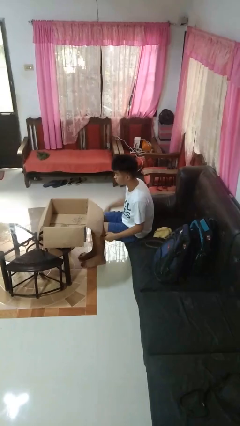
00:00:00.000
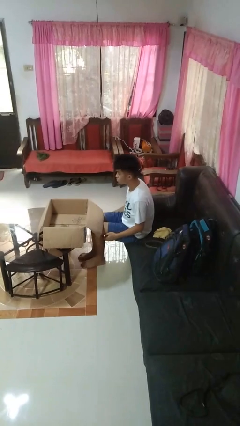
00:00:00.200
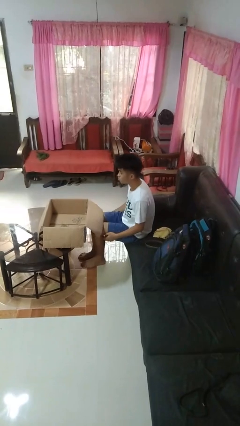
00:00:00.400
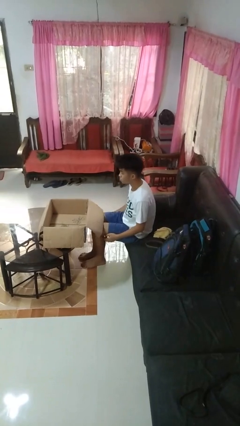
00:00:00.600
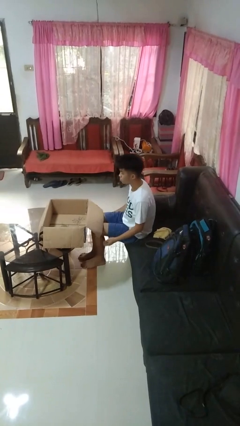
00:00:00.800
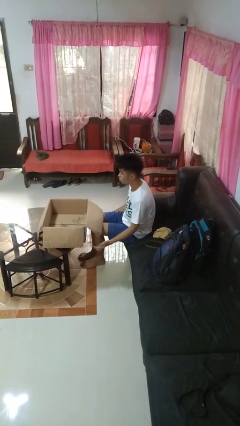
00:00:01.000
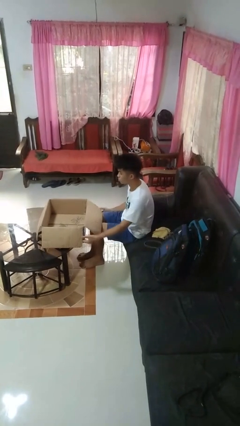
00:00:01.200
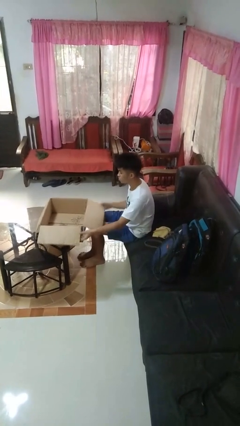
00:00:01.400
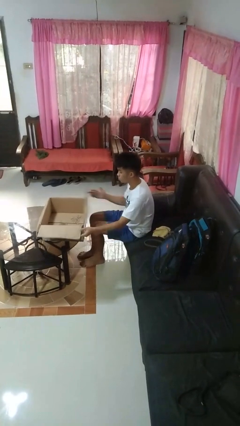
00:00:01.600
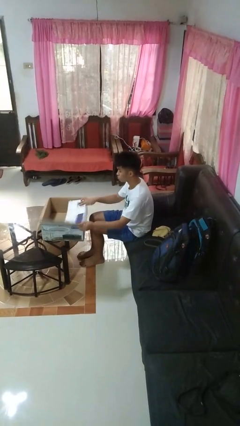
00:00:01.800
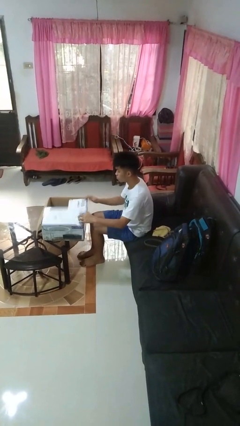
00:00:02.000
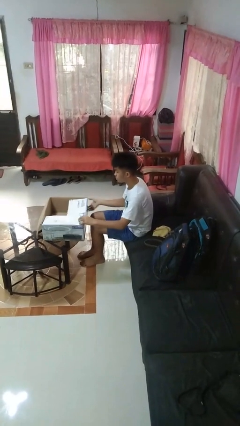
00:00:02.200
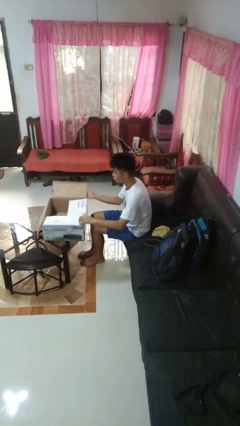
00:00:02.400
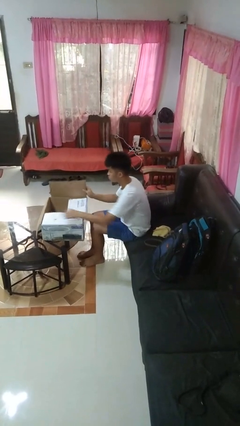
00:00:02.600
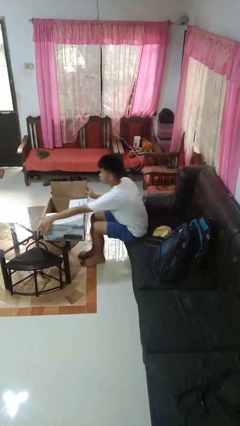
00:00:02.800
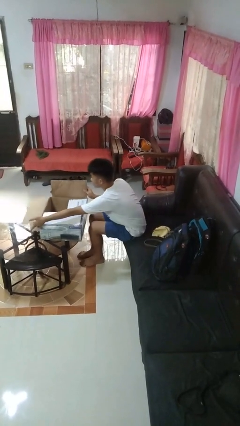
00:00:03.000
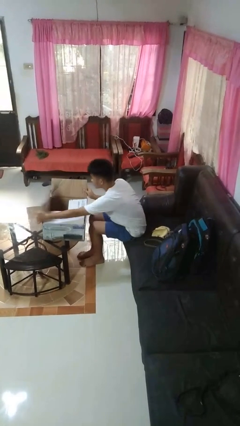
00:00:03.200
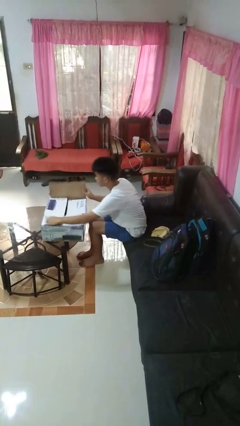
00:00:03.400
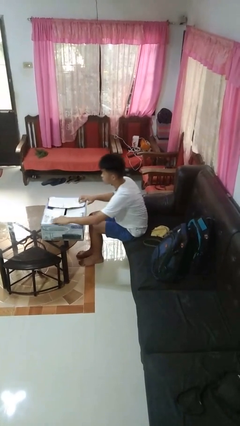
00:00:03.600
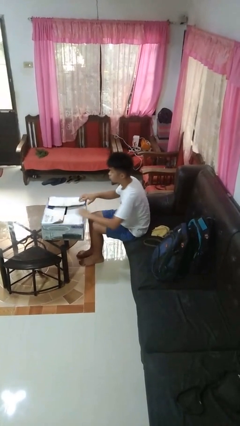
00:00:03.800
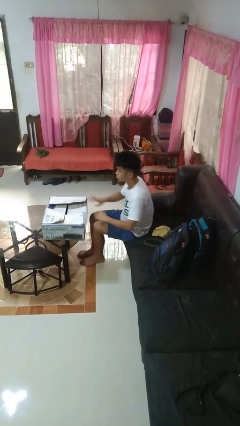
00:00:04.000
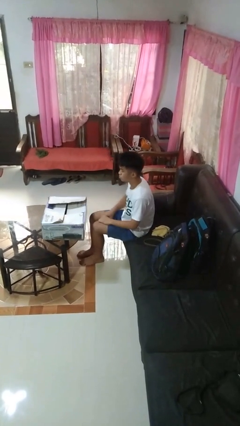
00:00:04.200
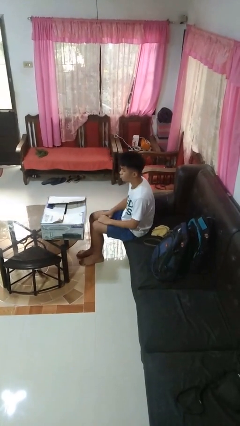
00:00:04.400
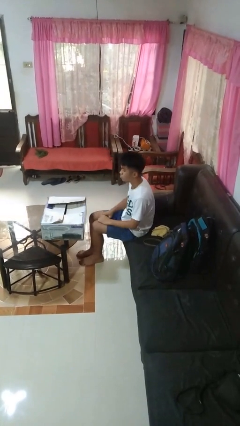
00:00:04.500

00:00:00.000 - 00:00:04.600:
person closes box

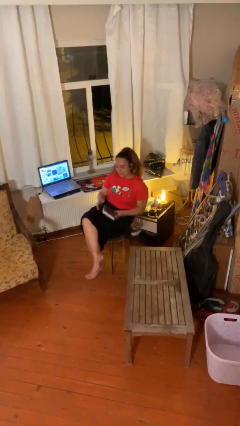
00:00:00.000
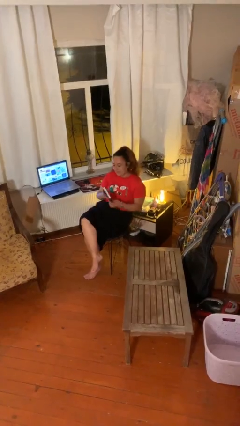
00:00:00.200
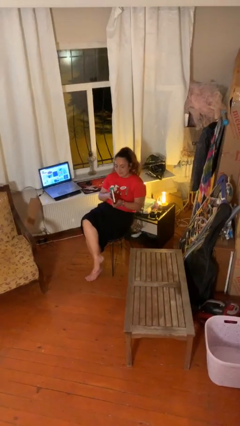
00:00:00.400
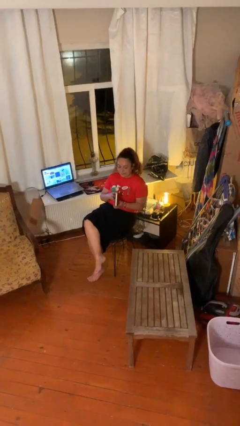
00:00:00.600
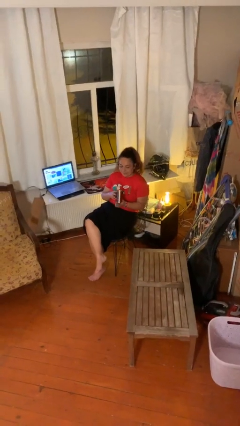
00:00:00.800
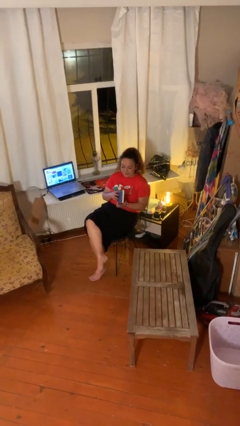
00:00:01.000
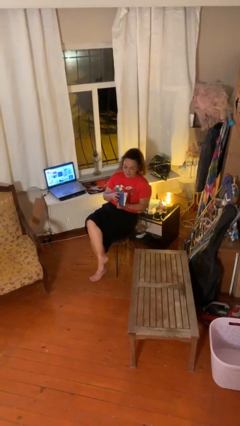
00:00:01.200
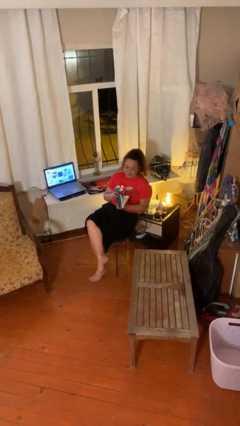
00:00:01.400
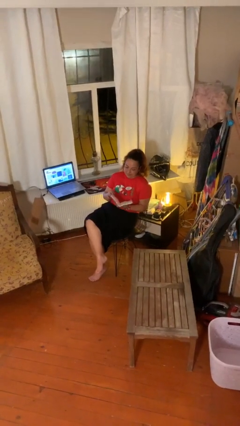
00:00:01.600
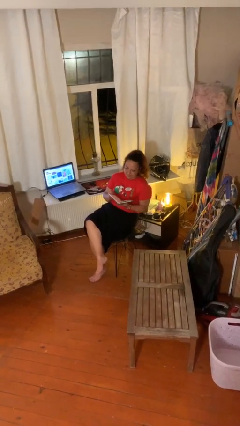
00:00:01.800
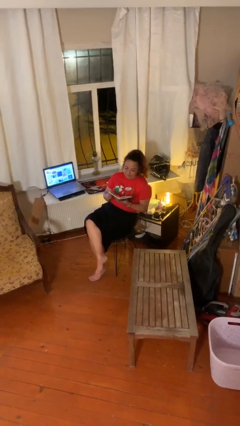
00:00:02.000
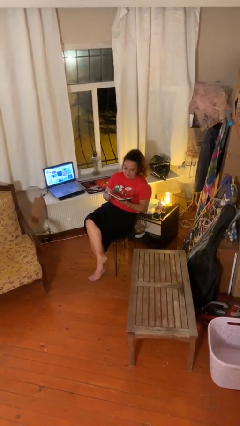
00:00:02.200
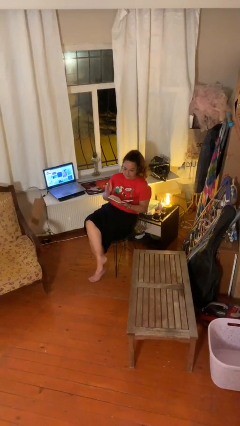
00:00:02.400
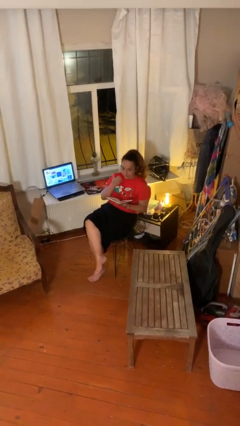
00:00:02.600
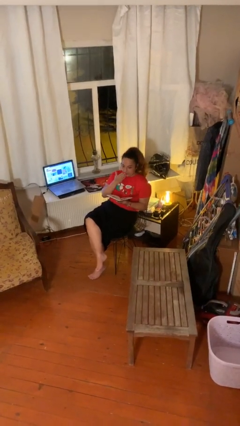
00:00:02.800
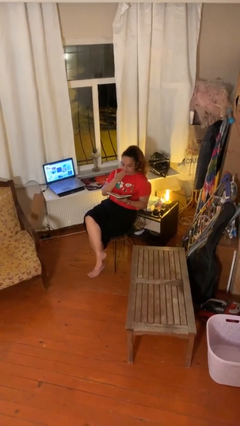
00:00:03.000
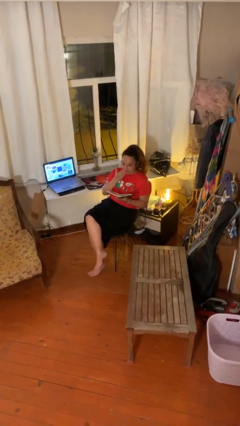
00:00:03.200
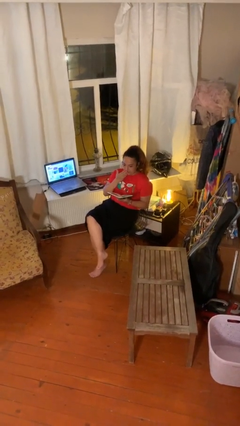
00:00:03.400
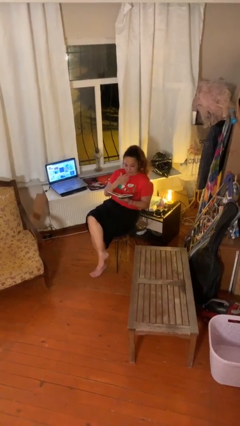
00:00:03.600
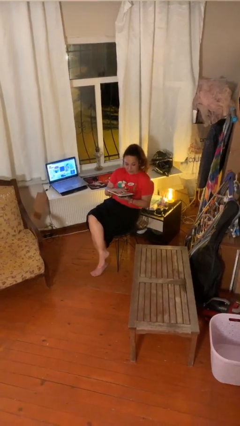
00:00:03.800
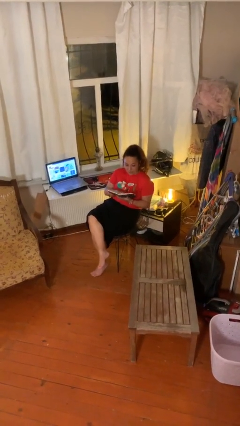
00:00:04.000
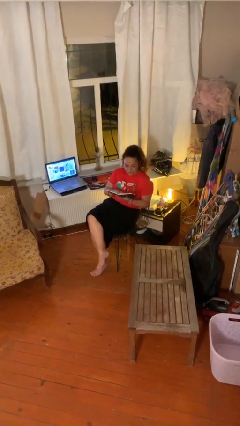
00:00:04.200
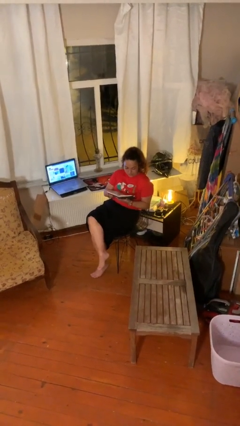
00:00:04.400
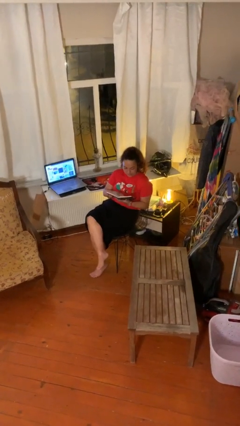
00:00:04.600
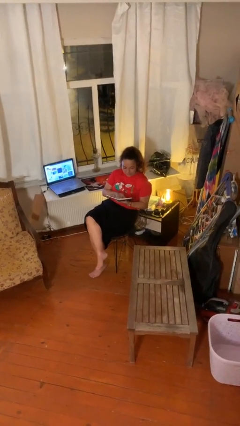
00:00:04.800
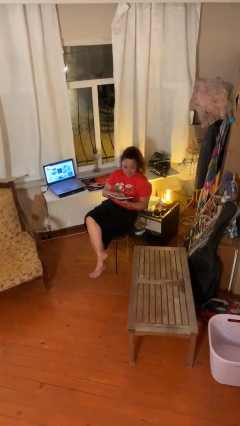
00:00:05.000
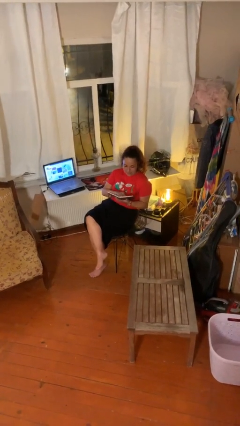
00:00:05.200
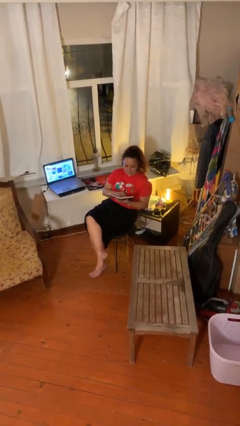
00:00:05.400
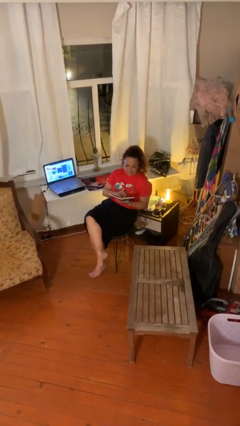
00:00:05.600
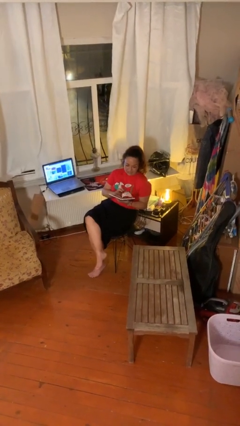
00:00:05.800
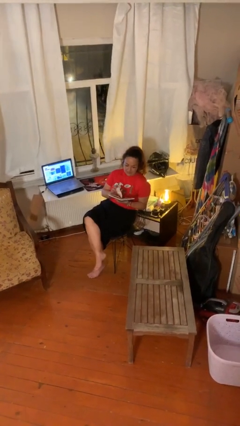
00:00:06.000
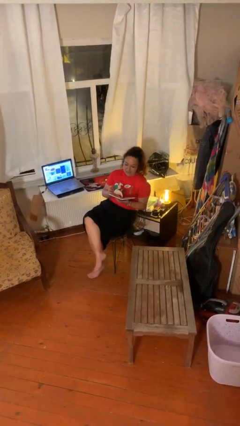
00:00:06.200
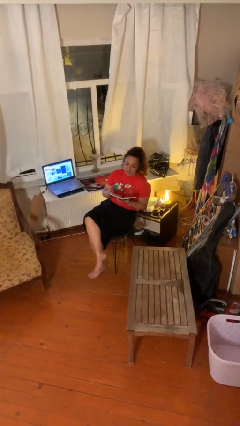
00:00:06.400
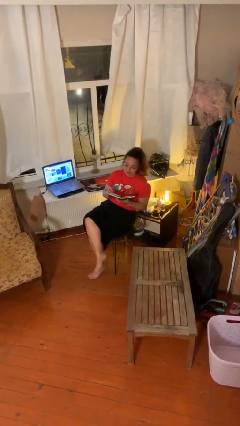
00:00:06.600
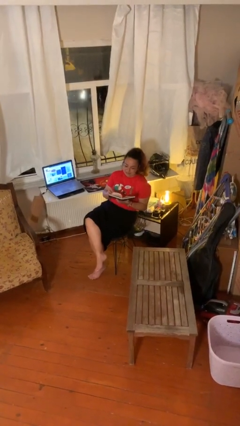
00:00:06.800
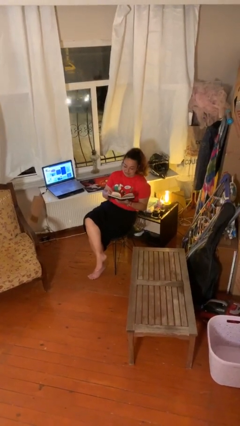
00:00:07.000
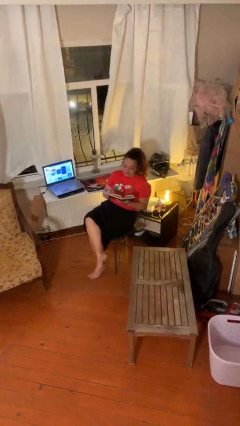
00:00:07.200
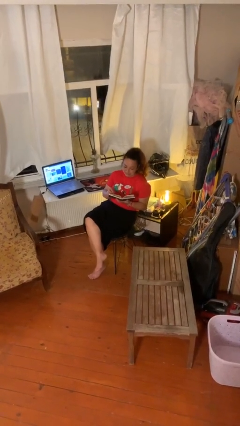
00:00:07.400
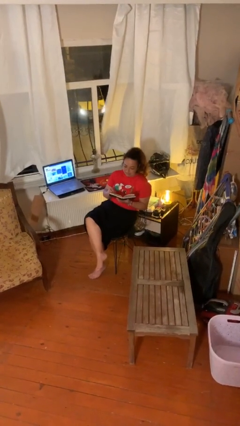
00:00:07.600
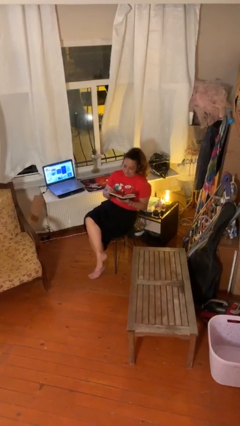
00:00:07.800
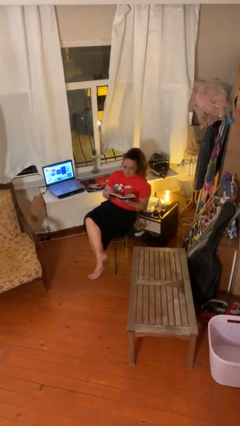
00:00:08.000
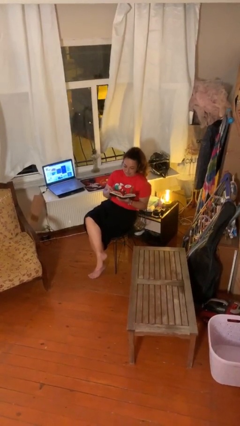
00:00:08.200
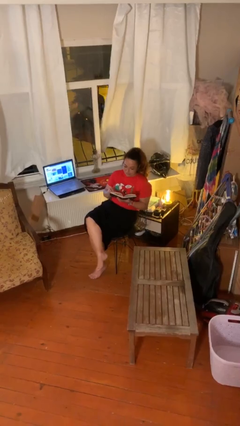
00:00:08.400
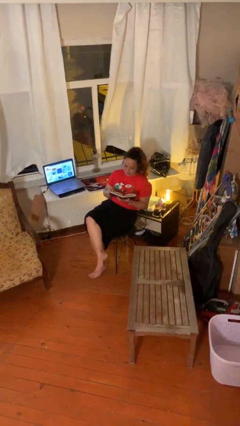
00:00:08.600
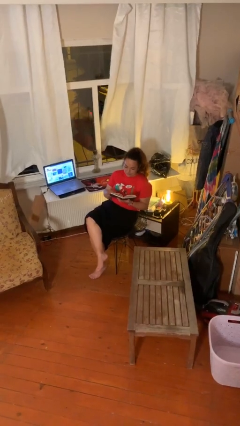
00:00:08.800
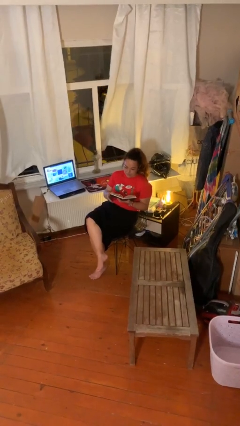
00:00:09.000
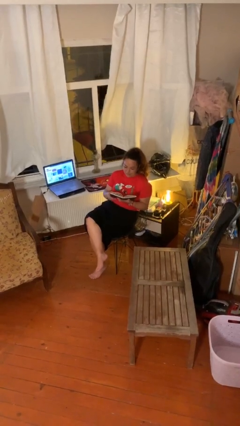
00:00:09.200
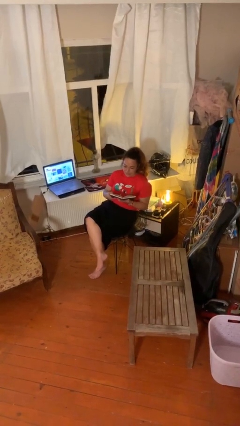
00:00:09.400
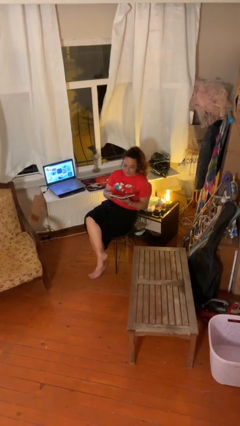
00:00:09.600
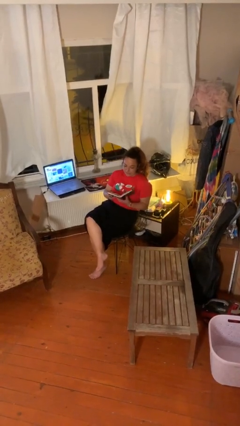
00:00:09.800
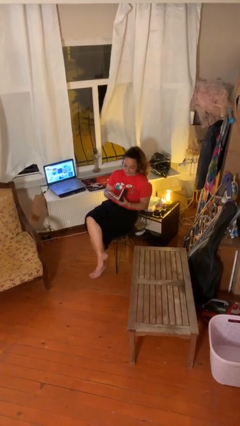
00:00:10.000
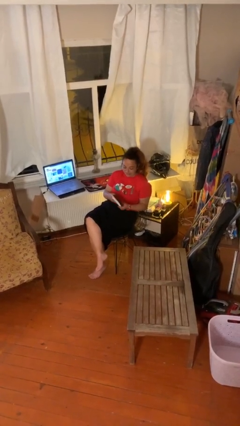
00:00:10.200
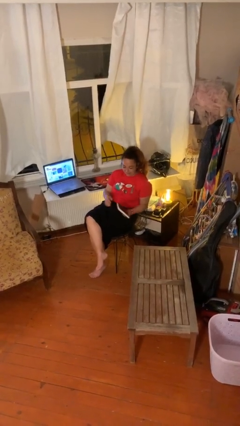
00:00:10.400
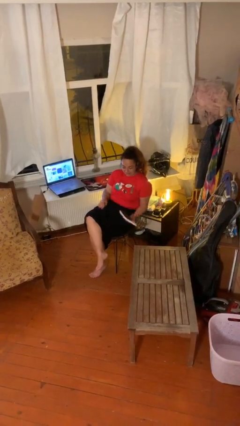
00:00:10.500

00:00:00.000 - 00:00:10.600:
person reads document

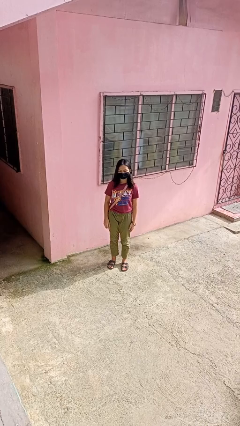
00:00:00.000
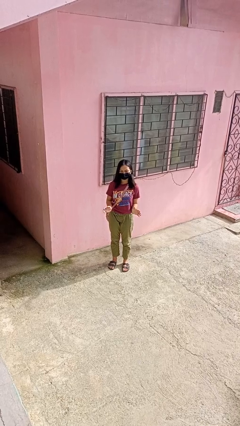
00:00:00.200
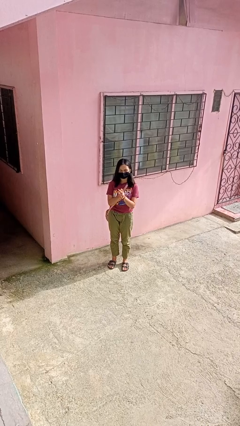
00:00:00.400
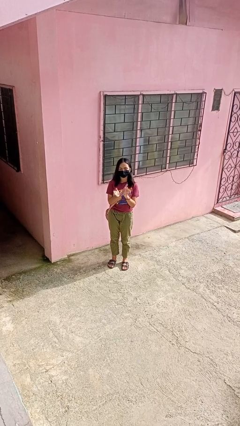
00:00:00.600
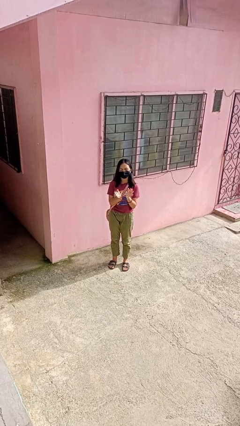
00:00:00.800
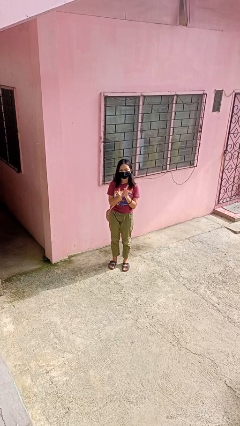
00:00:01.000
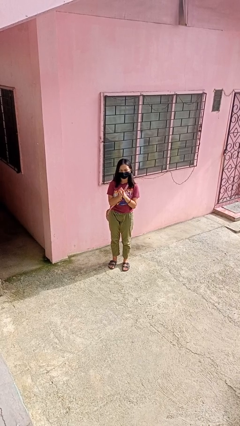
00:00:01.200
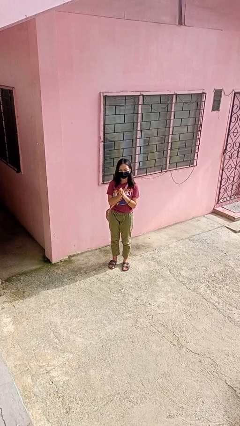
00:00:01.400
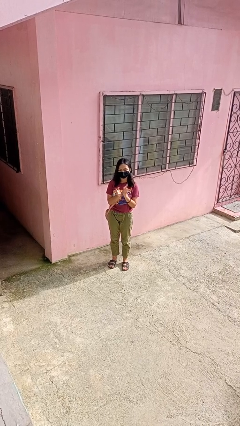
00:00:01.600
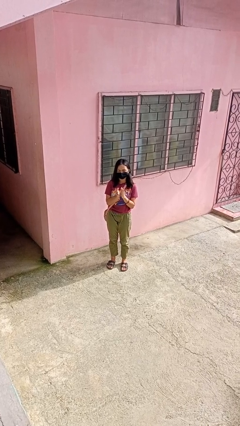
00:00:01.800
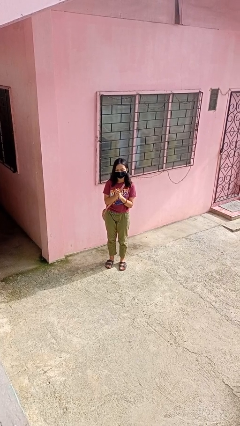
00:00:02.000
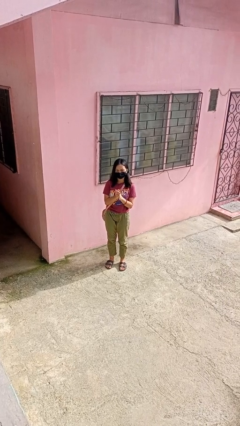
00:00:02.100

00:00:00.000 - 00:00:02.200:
person claps hands

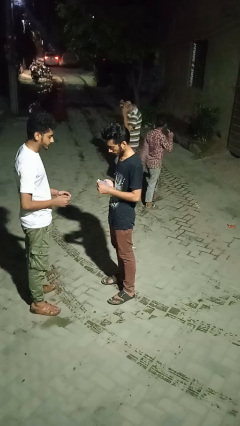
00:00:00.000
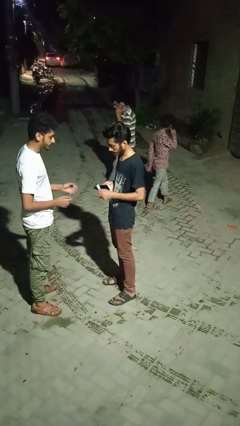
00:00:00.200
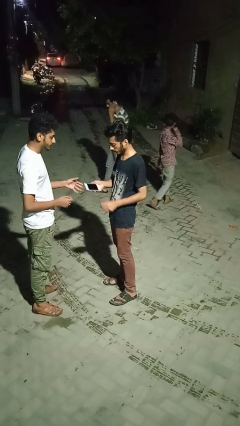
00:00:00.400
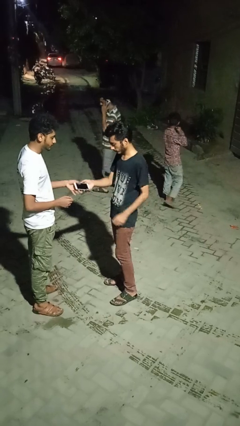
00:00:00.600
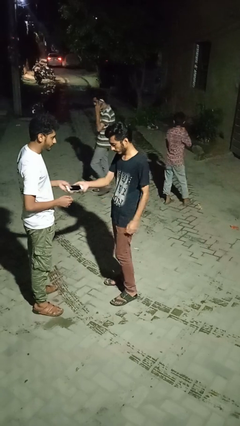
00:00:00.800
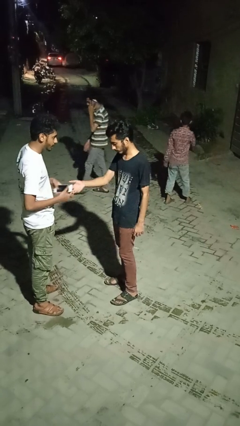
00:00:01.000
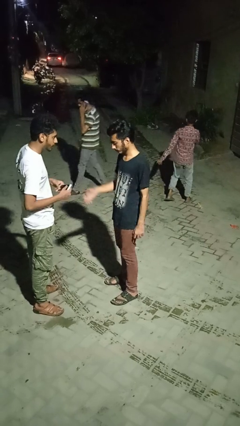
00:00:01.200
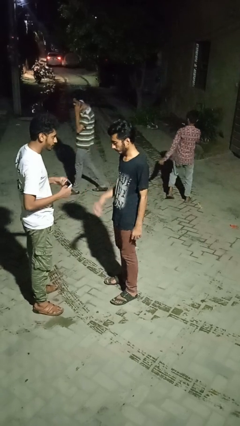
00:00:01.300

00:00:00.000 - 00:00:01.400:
person transfers object to person
